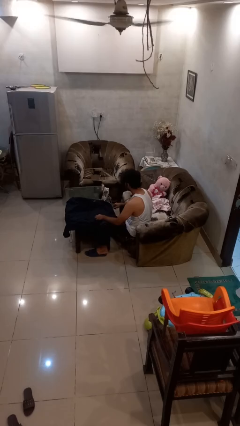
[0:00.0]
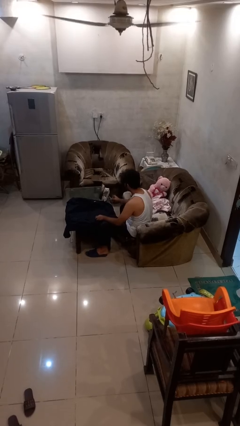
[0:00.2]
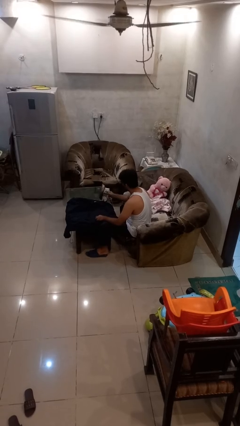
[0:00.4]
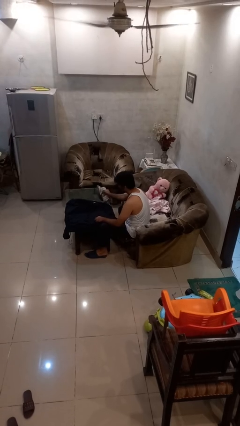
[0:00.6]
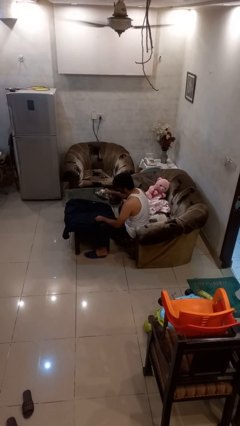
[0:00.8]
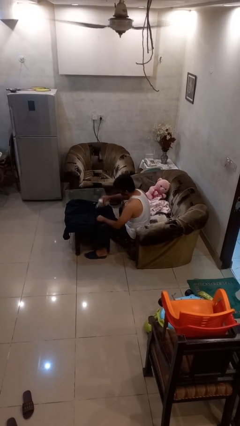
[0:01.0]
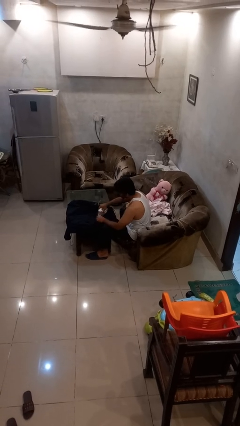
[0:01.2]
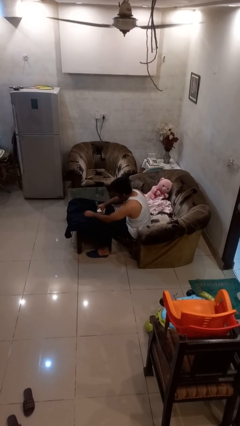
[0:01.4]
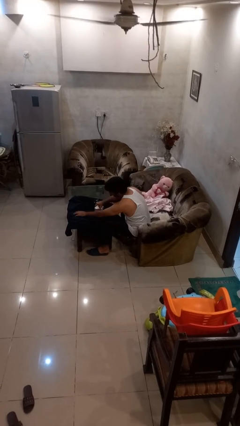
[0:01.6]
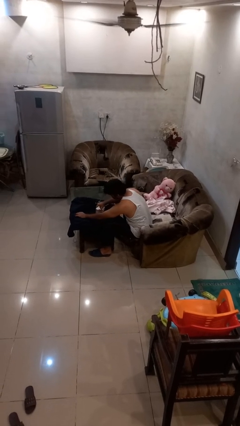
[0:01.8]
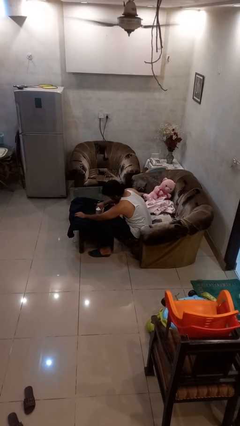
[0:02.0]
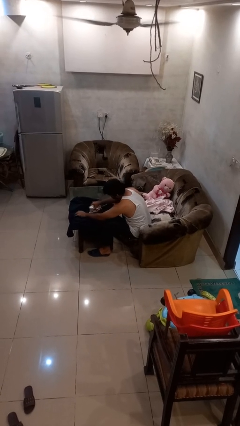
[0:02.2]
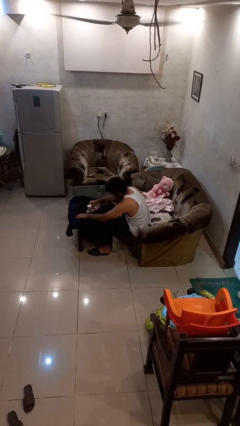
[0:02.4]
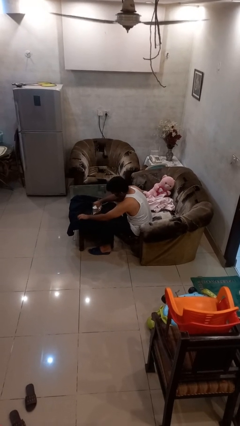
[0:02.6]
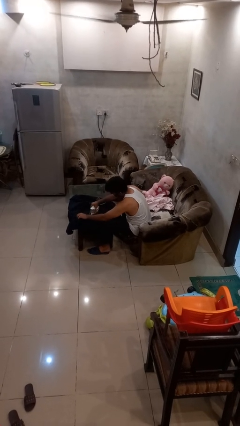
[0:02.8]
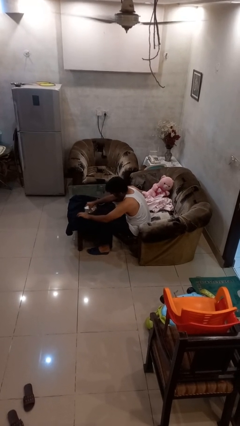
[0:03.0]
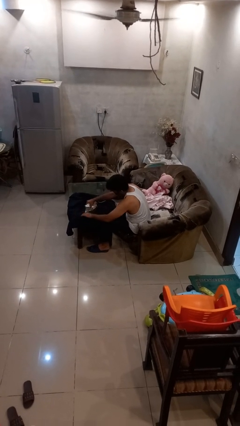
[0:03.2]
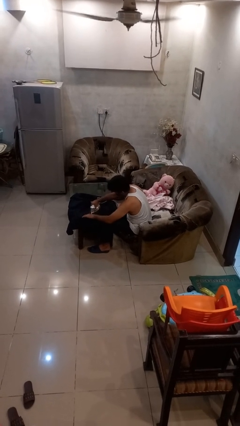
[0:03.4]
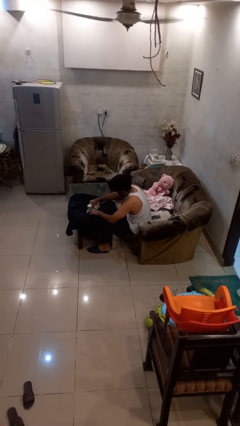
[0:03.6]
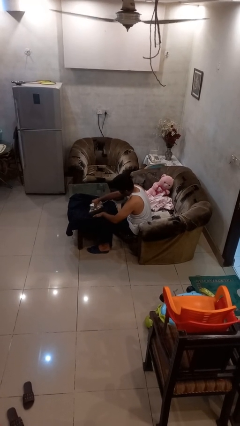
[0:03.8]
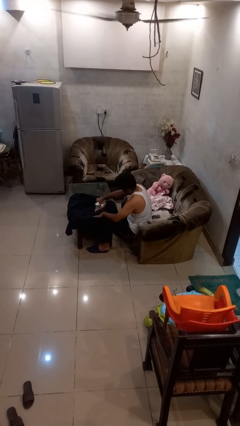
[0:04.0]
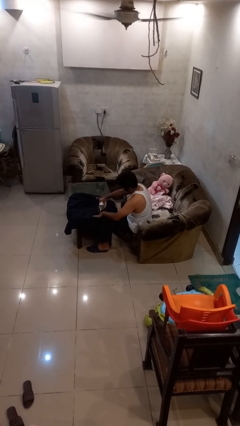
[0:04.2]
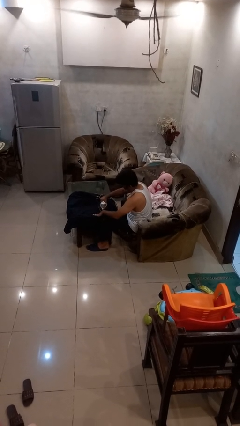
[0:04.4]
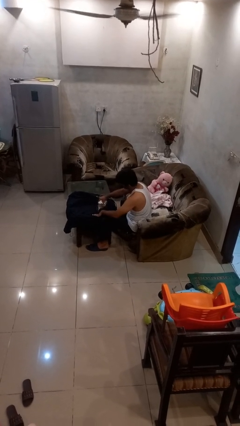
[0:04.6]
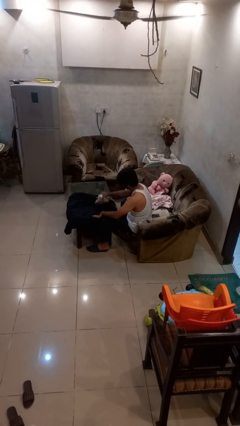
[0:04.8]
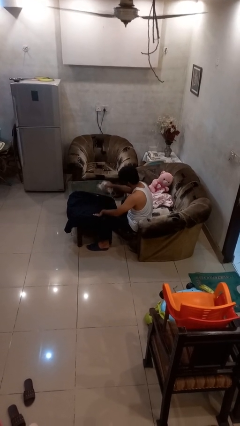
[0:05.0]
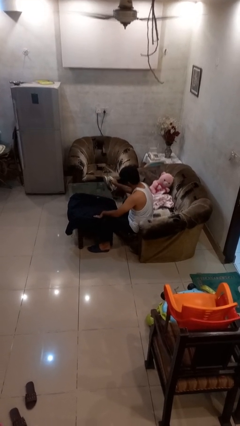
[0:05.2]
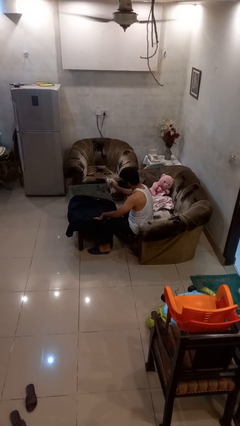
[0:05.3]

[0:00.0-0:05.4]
person irons clothes

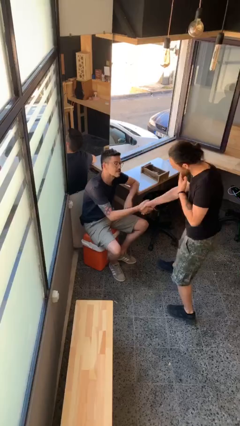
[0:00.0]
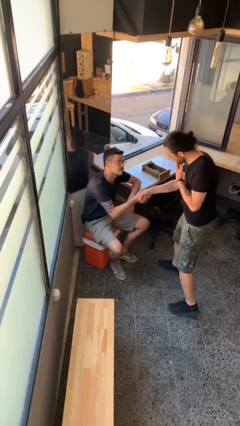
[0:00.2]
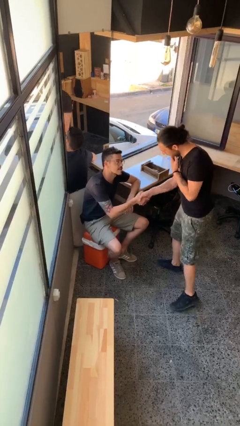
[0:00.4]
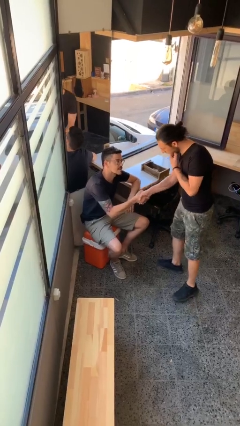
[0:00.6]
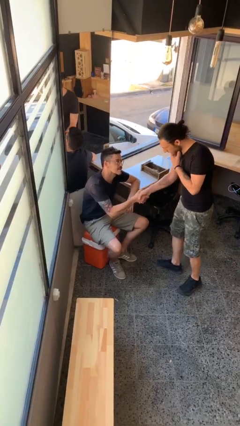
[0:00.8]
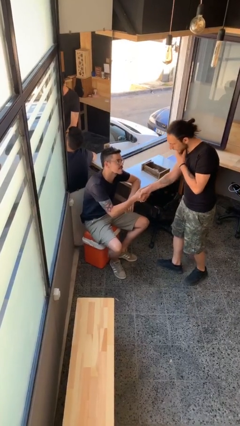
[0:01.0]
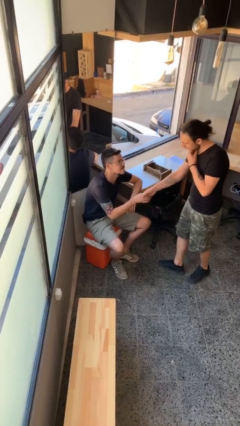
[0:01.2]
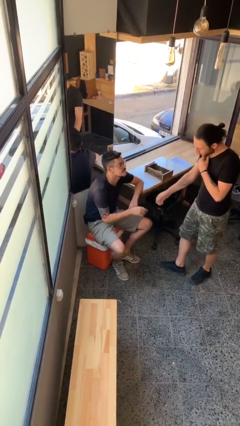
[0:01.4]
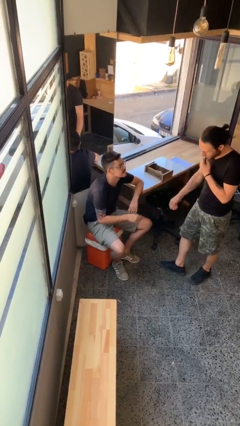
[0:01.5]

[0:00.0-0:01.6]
person shakes hand

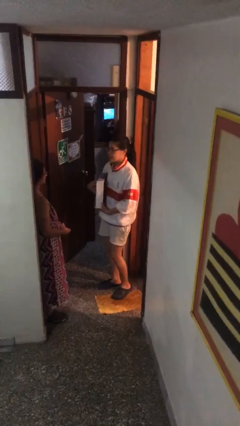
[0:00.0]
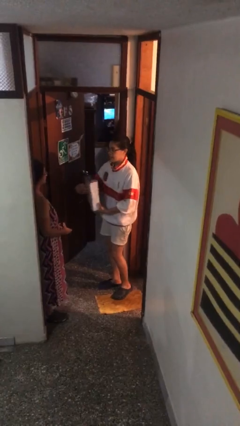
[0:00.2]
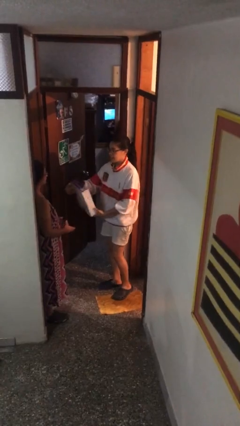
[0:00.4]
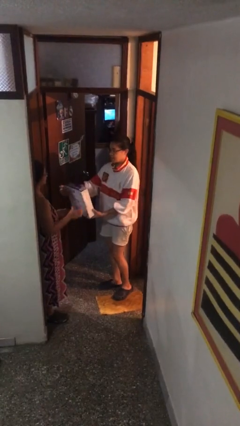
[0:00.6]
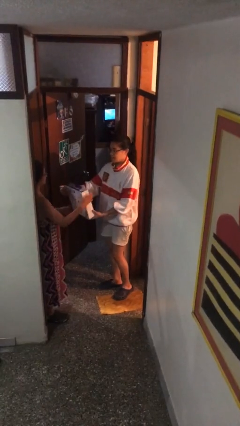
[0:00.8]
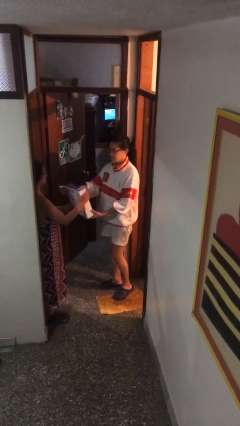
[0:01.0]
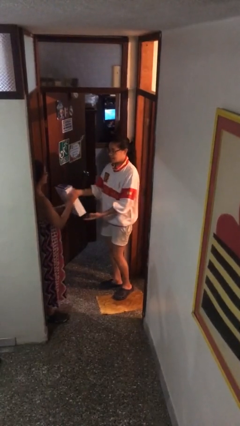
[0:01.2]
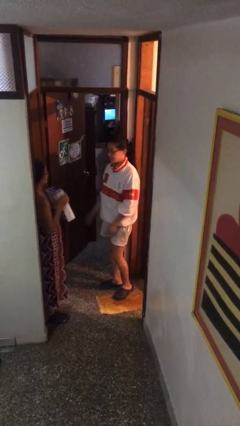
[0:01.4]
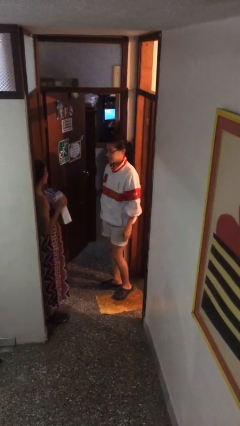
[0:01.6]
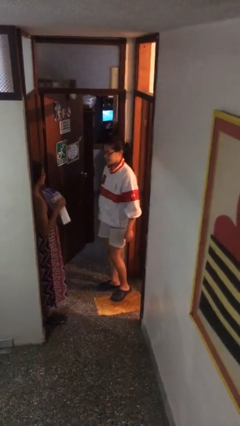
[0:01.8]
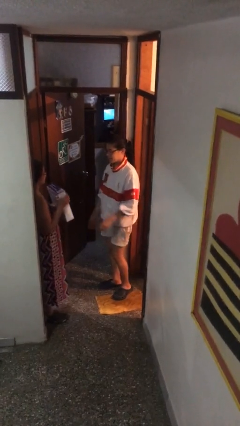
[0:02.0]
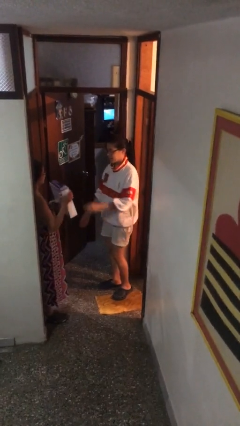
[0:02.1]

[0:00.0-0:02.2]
person transfers object to person

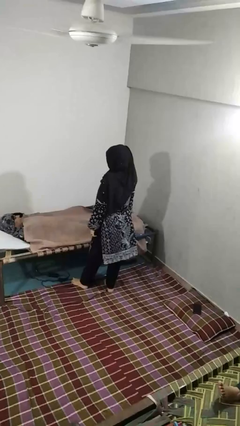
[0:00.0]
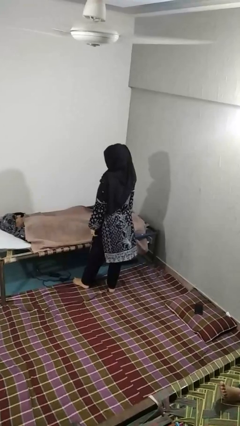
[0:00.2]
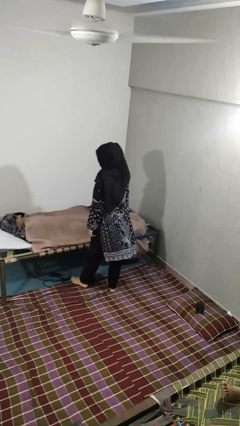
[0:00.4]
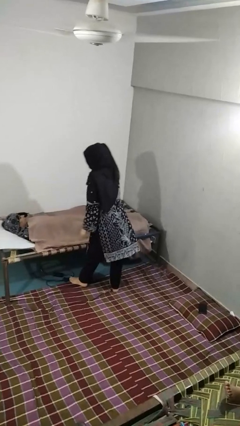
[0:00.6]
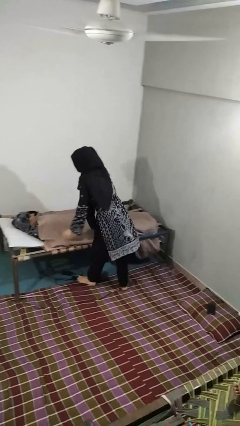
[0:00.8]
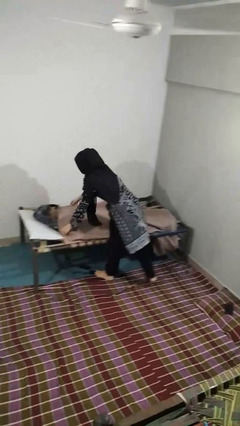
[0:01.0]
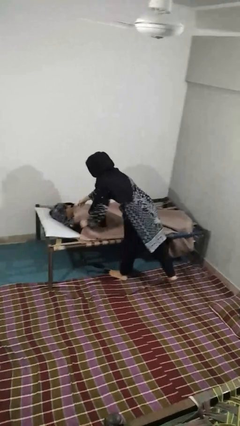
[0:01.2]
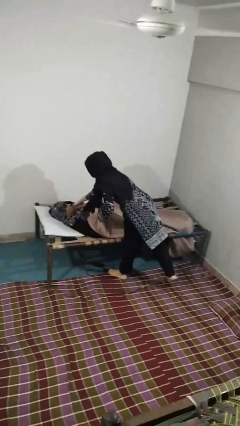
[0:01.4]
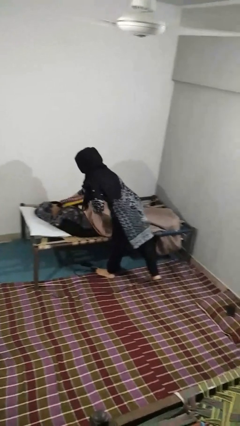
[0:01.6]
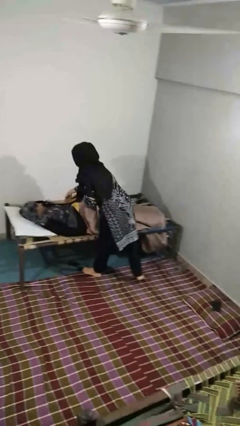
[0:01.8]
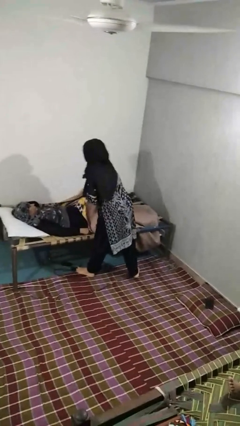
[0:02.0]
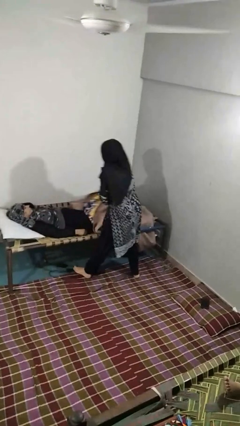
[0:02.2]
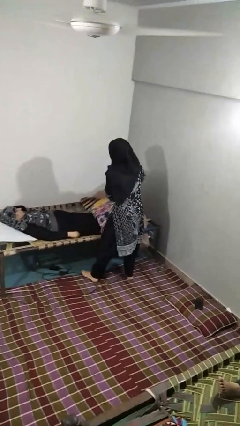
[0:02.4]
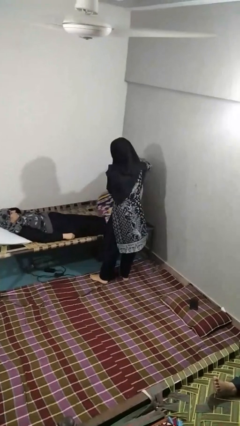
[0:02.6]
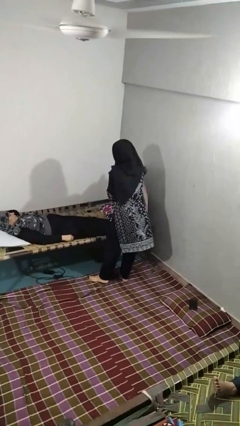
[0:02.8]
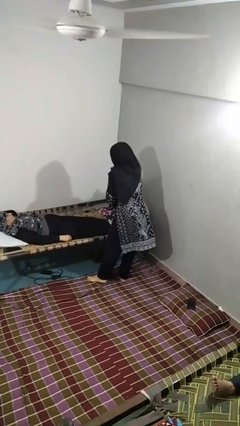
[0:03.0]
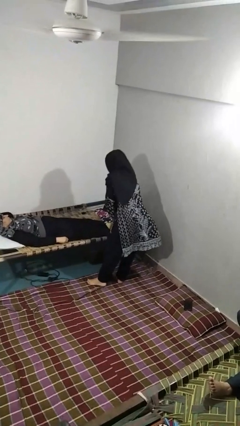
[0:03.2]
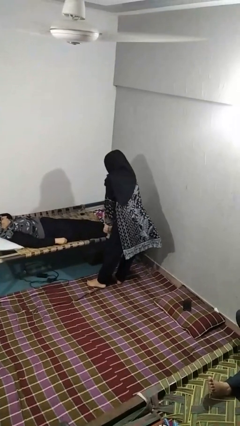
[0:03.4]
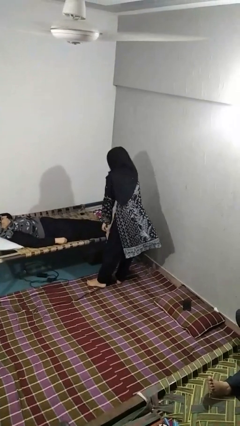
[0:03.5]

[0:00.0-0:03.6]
person uncovers friend with blanket

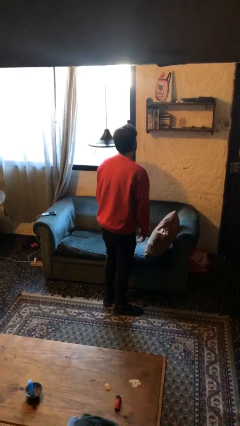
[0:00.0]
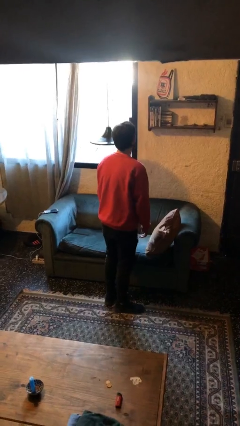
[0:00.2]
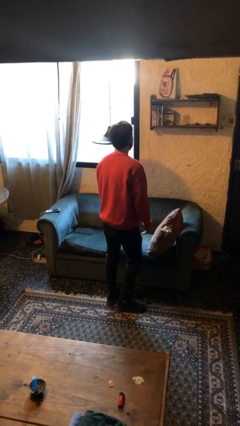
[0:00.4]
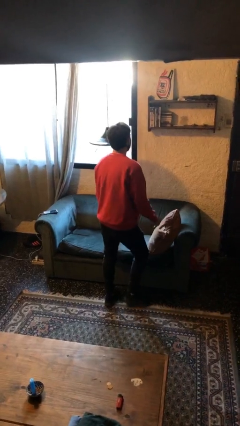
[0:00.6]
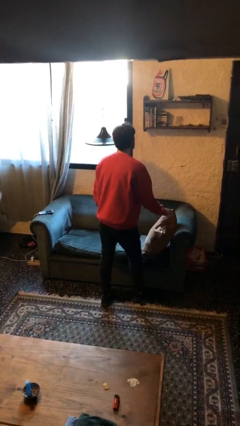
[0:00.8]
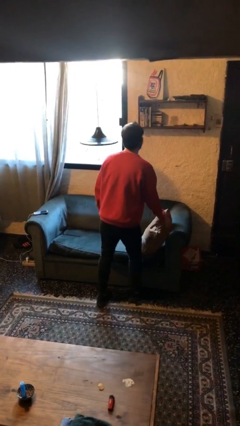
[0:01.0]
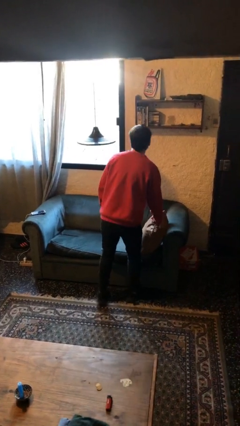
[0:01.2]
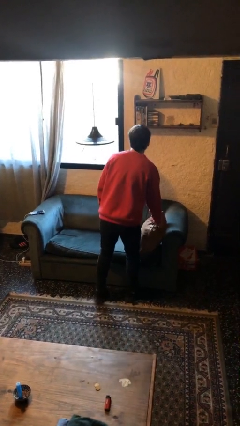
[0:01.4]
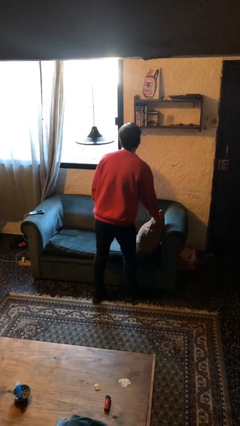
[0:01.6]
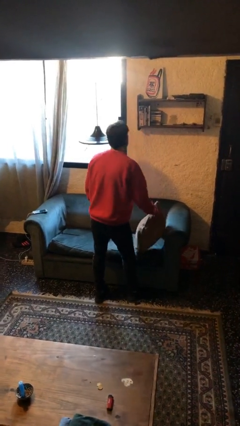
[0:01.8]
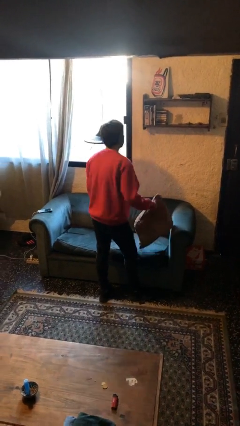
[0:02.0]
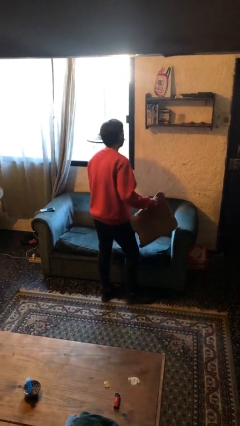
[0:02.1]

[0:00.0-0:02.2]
person picks up object from couch

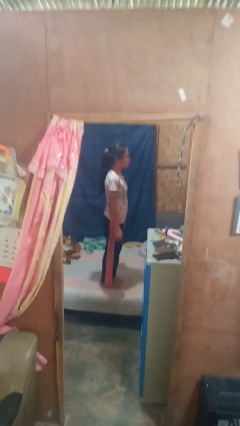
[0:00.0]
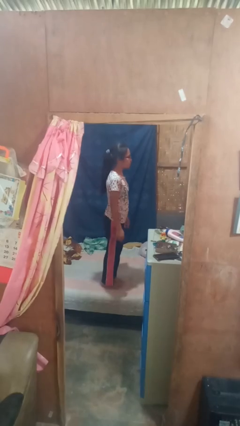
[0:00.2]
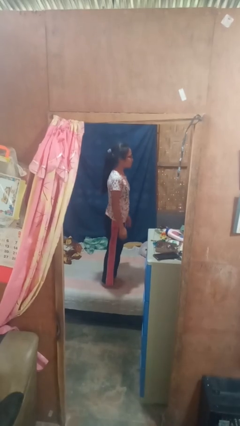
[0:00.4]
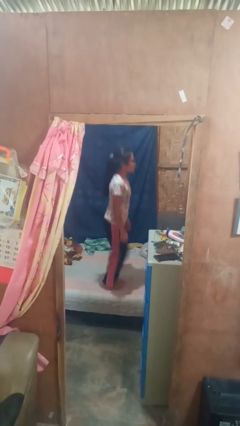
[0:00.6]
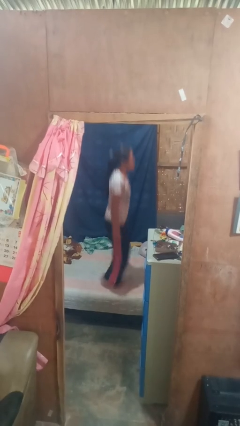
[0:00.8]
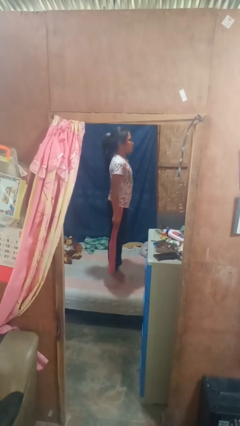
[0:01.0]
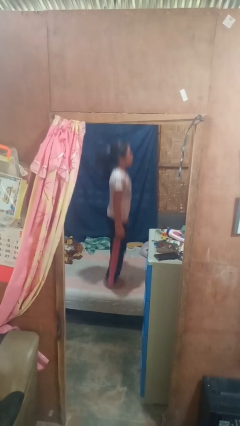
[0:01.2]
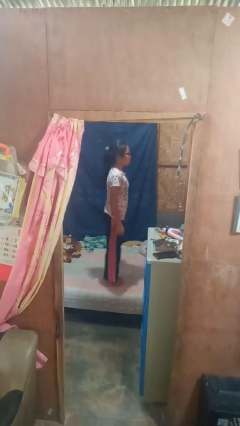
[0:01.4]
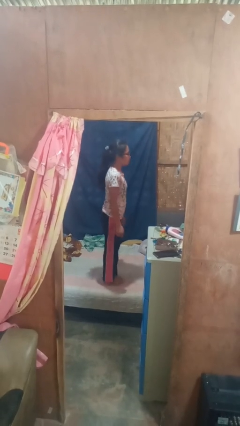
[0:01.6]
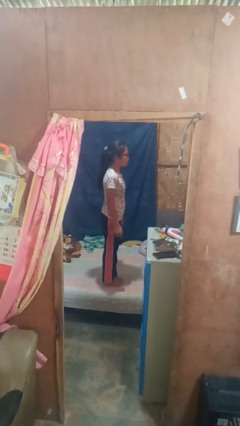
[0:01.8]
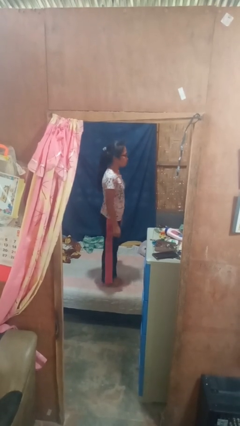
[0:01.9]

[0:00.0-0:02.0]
person jumps on bed

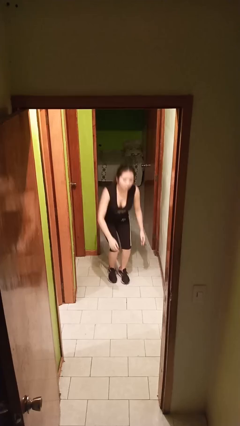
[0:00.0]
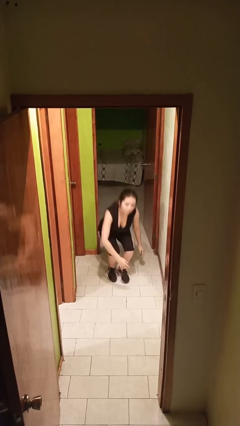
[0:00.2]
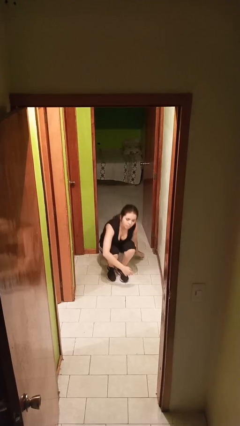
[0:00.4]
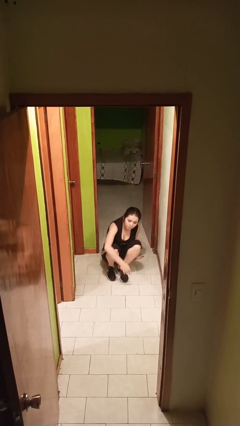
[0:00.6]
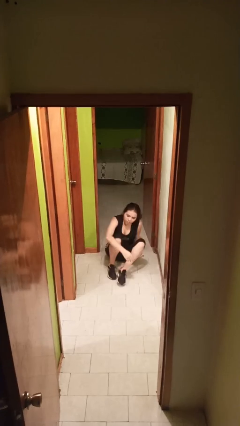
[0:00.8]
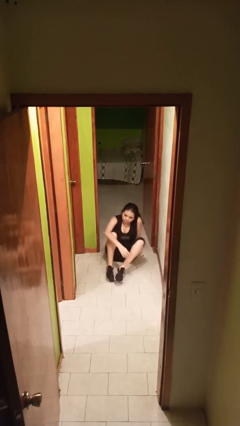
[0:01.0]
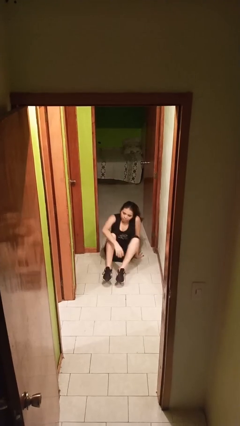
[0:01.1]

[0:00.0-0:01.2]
person sits down
